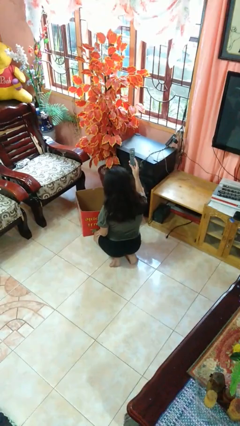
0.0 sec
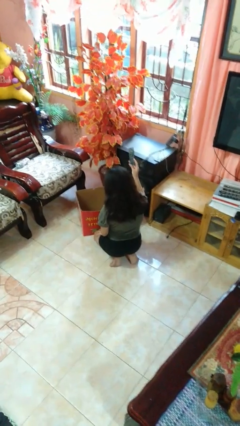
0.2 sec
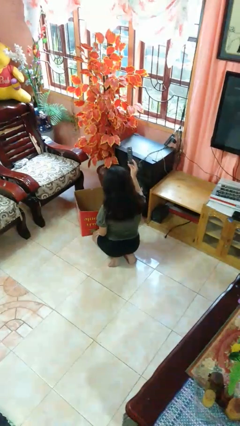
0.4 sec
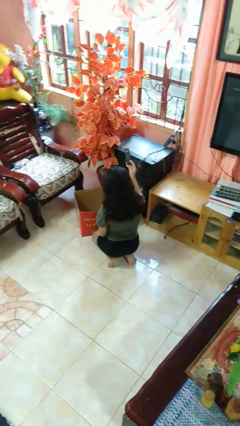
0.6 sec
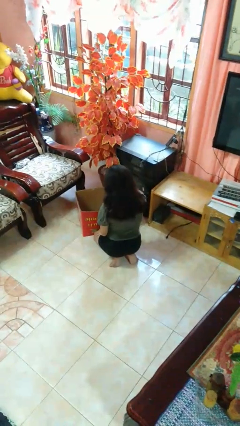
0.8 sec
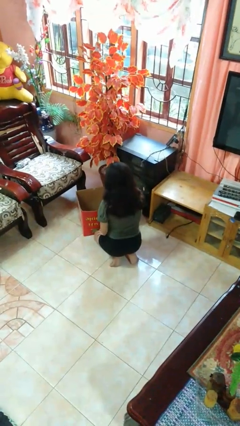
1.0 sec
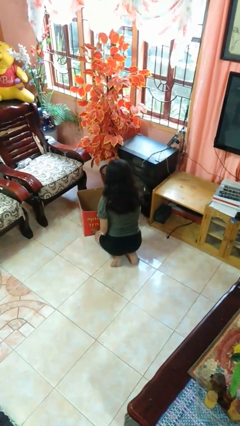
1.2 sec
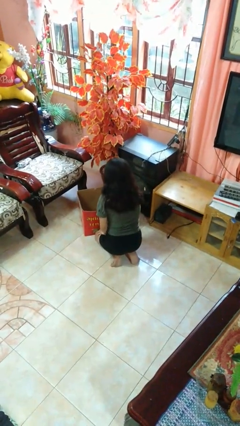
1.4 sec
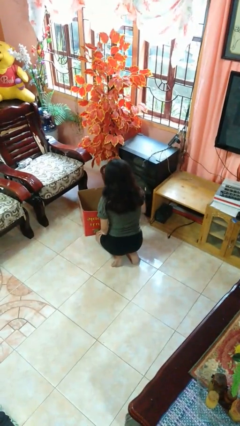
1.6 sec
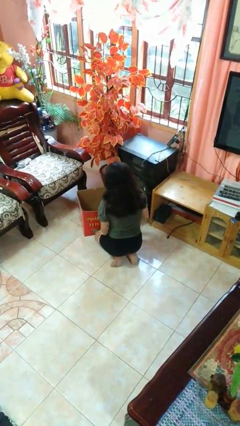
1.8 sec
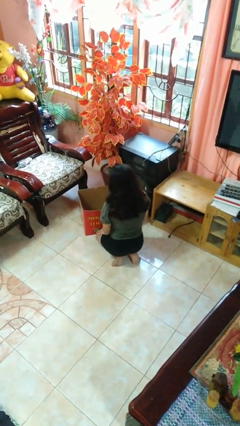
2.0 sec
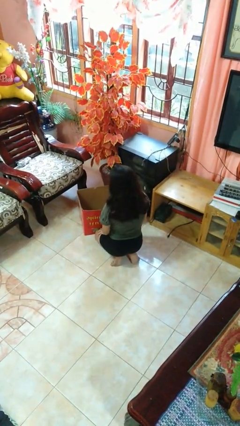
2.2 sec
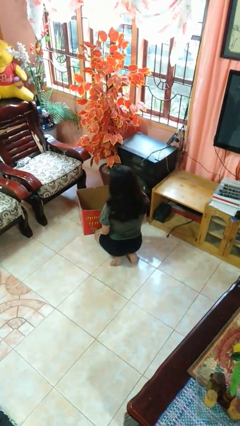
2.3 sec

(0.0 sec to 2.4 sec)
person puts object into box

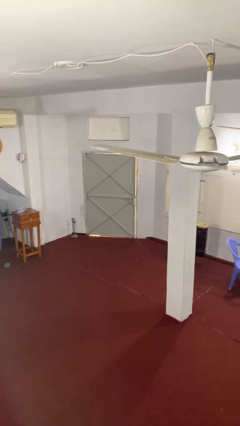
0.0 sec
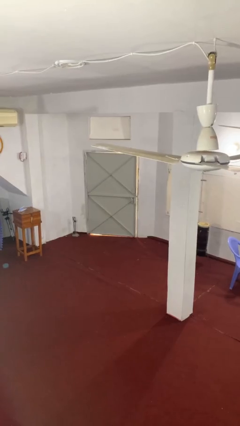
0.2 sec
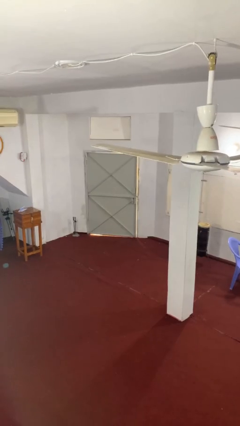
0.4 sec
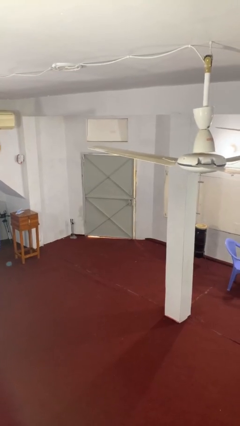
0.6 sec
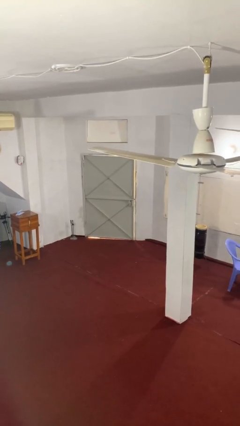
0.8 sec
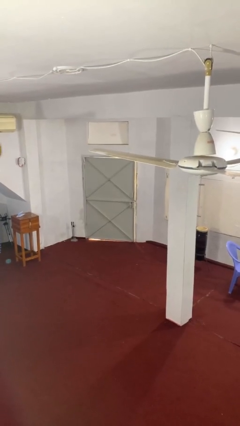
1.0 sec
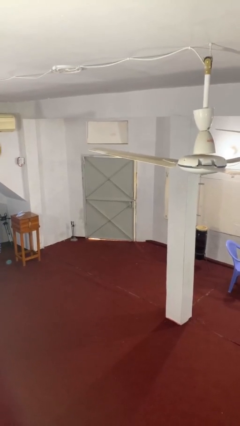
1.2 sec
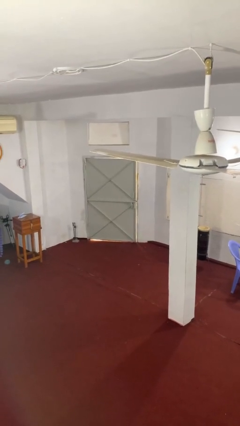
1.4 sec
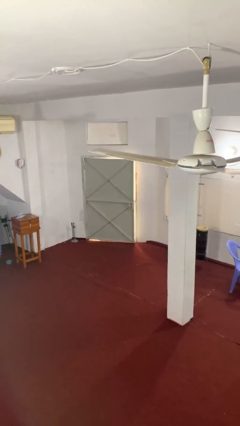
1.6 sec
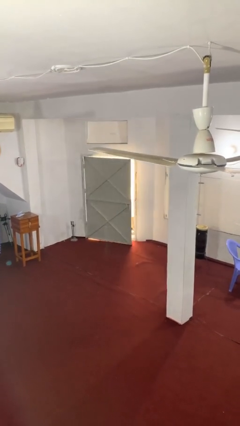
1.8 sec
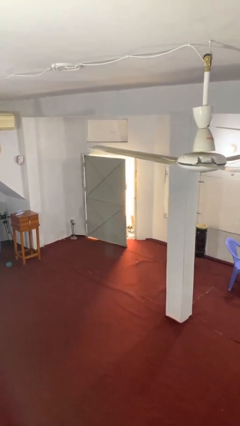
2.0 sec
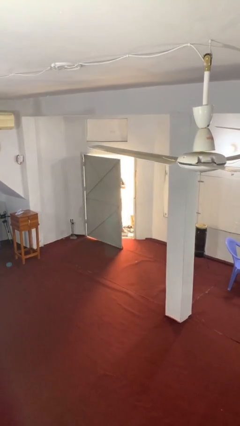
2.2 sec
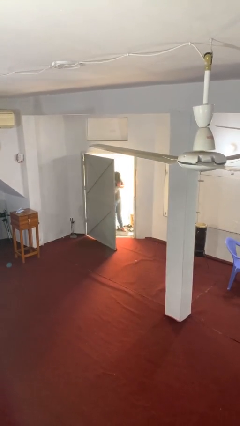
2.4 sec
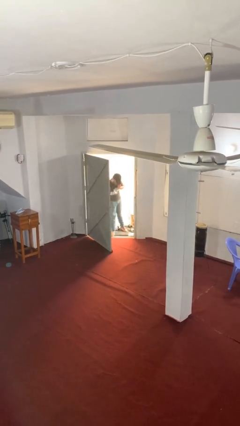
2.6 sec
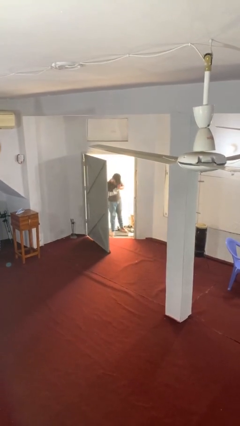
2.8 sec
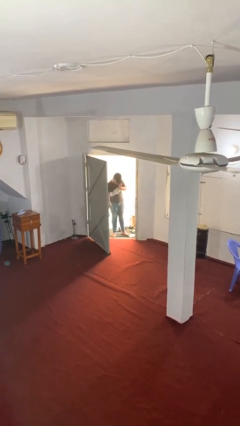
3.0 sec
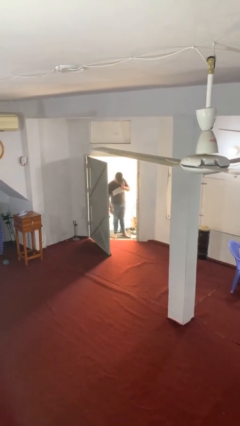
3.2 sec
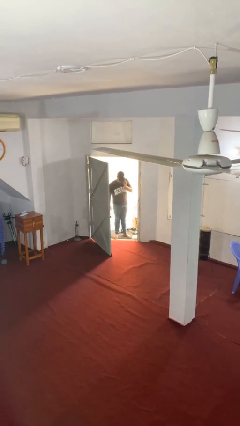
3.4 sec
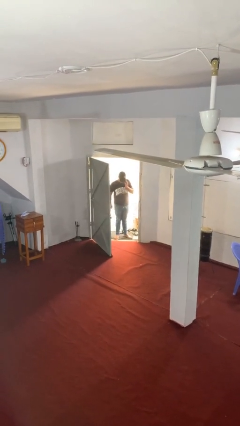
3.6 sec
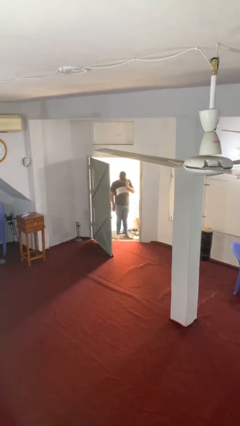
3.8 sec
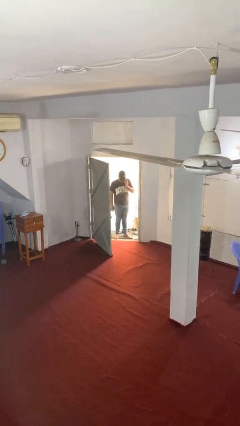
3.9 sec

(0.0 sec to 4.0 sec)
person opens facility door

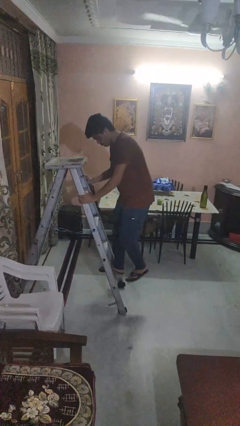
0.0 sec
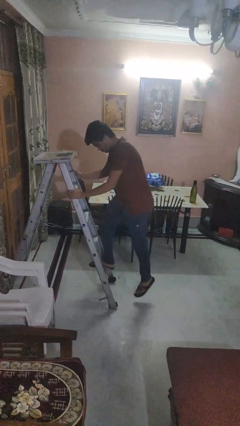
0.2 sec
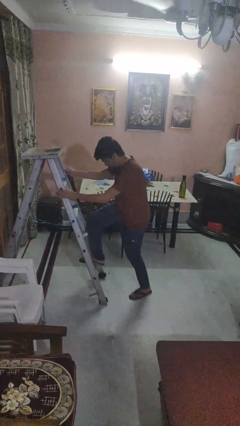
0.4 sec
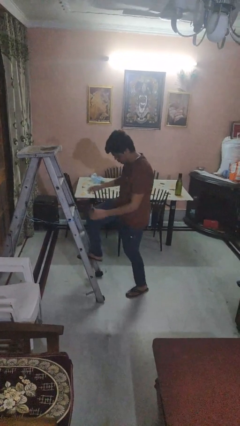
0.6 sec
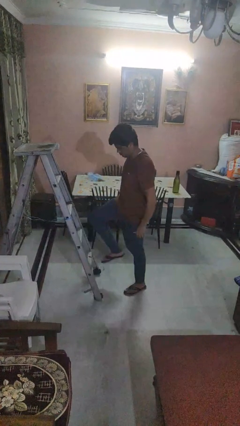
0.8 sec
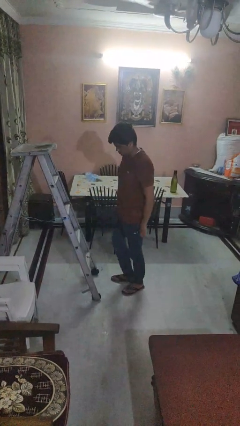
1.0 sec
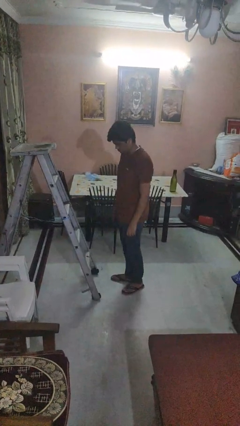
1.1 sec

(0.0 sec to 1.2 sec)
person climbs down ladder

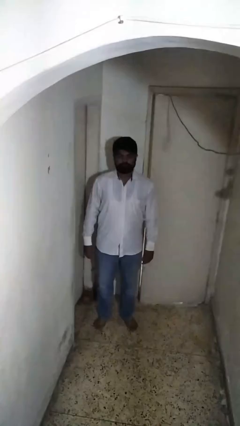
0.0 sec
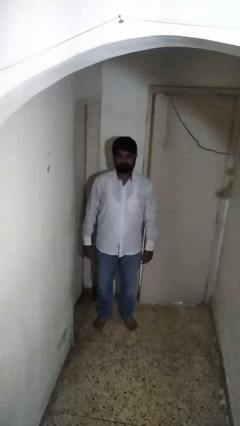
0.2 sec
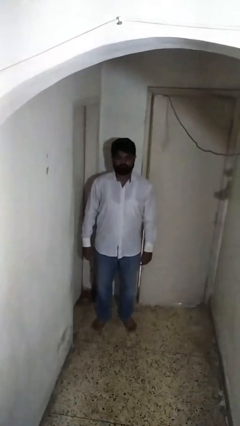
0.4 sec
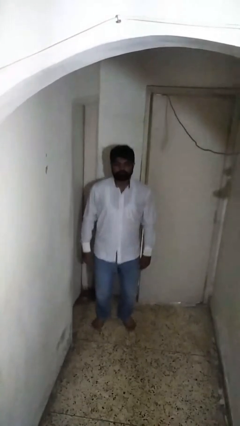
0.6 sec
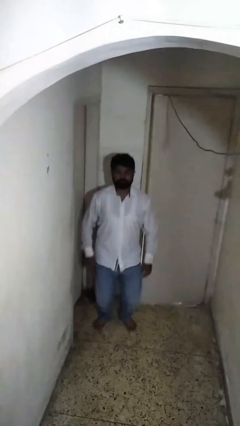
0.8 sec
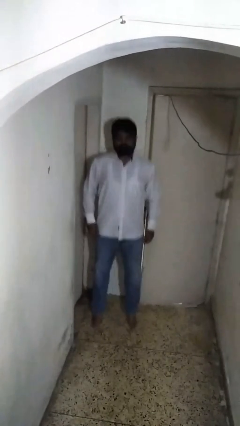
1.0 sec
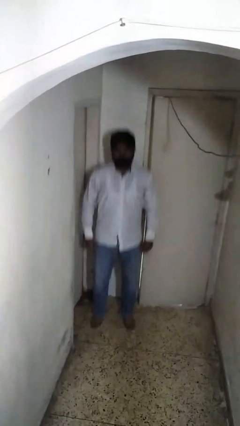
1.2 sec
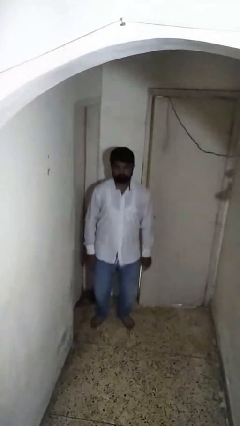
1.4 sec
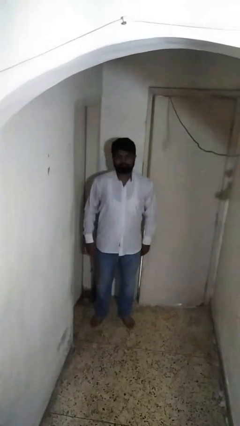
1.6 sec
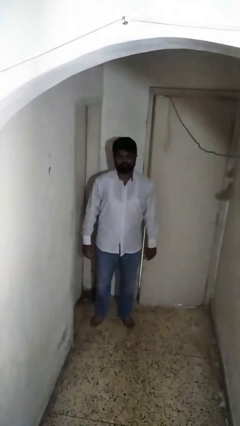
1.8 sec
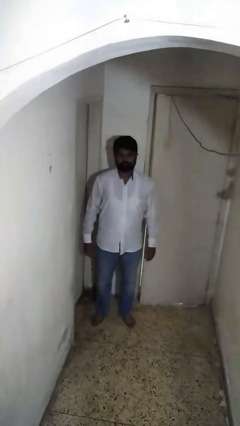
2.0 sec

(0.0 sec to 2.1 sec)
person jumps

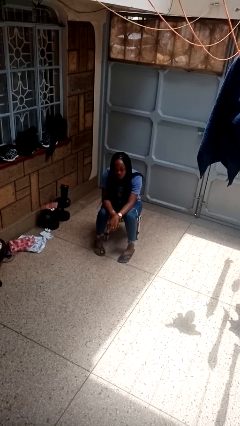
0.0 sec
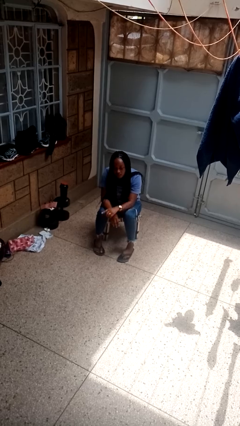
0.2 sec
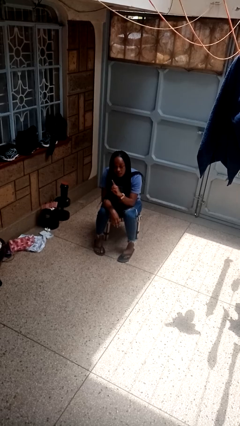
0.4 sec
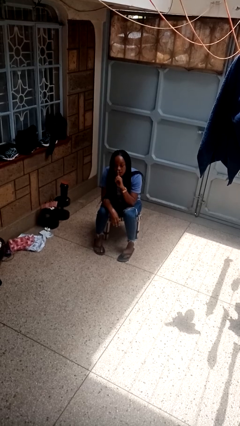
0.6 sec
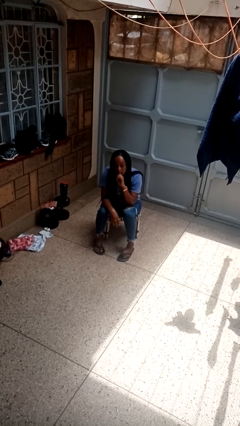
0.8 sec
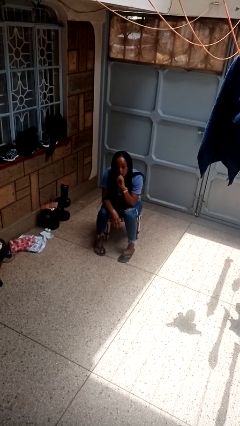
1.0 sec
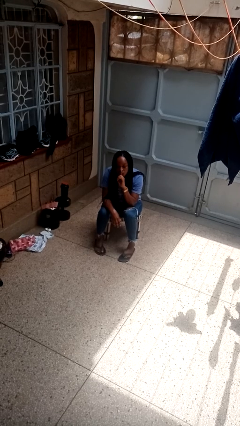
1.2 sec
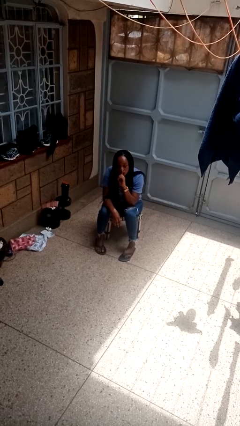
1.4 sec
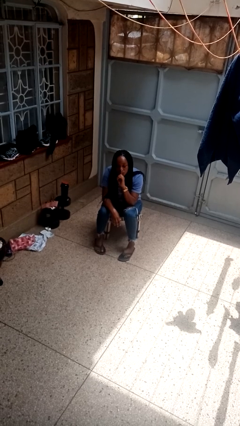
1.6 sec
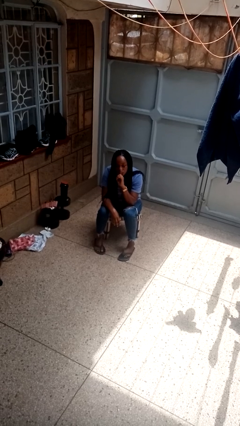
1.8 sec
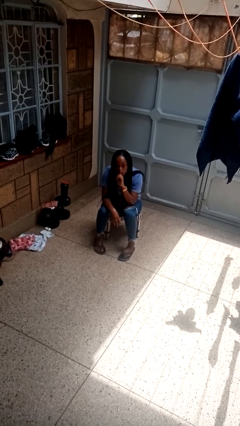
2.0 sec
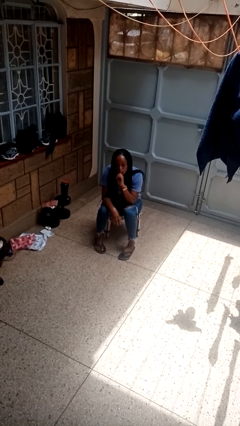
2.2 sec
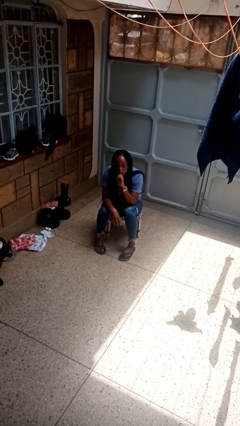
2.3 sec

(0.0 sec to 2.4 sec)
person gestures be quiet

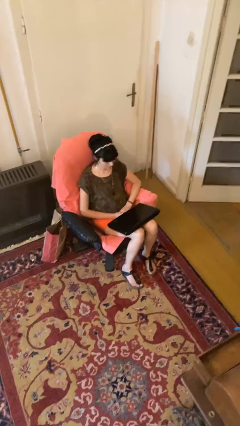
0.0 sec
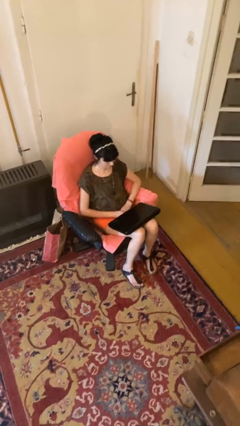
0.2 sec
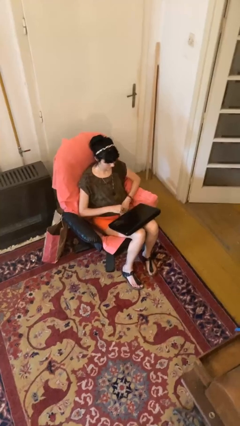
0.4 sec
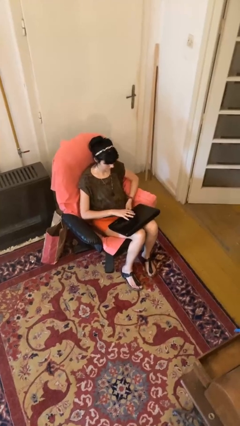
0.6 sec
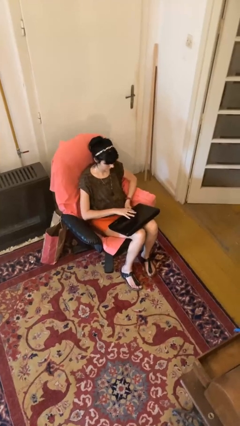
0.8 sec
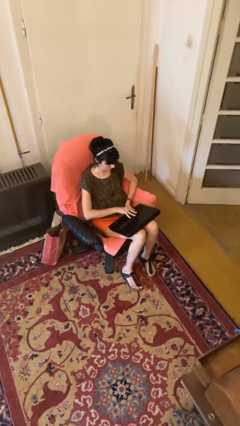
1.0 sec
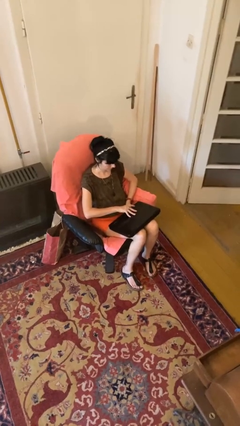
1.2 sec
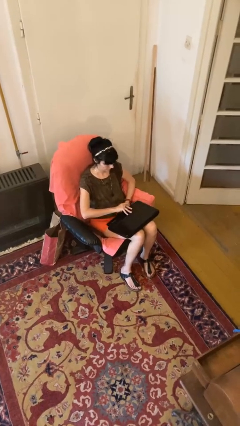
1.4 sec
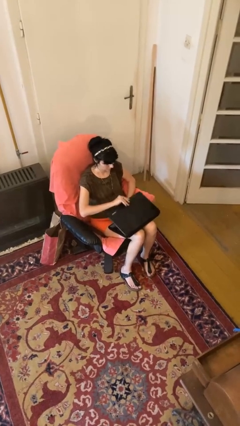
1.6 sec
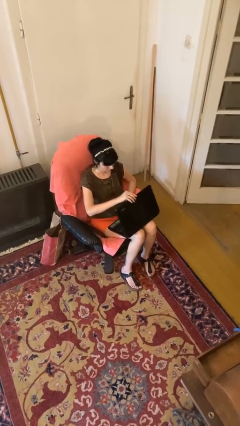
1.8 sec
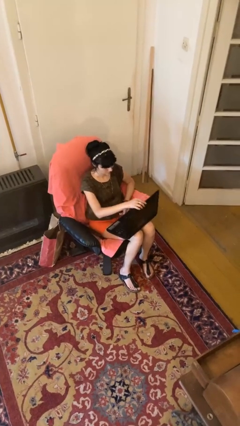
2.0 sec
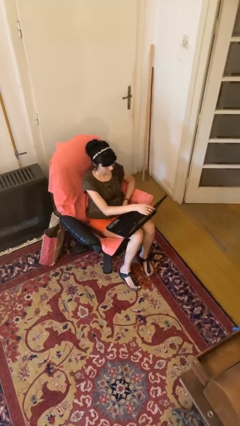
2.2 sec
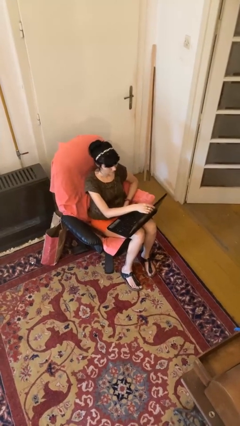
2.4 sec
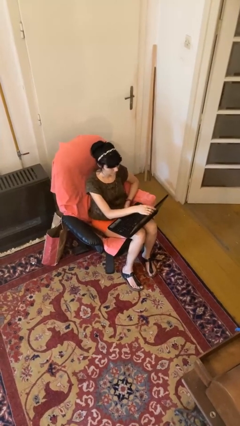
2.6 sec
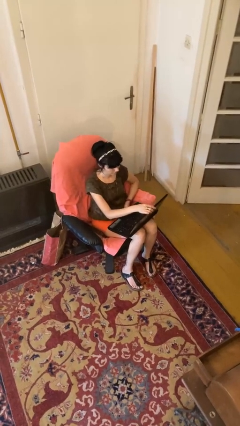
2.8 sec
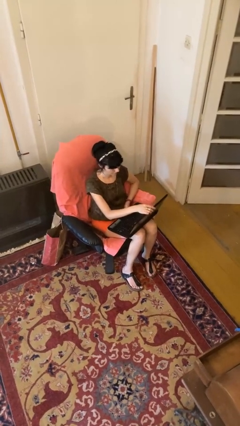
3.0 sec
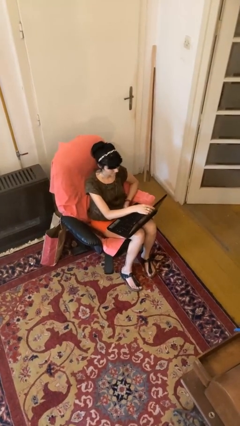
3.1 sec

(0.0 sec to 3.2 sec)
person opens laptop

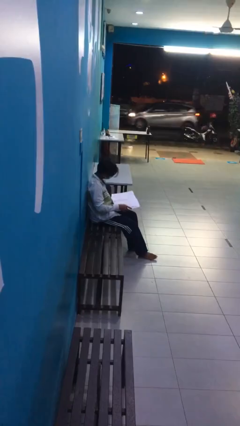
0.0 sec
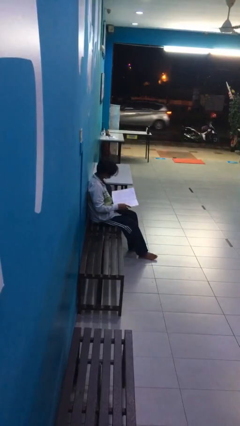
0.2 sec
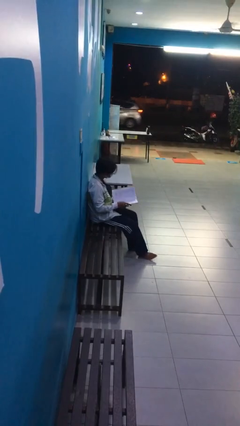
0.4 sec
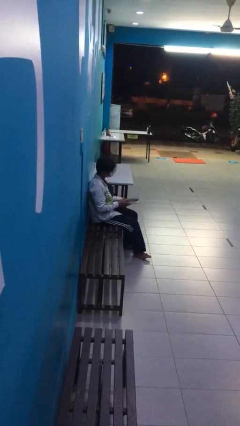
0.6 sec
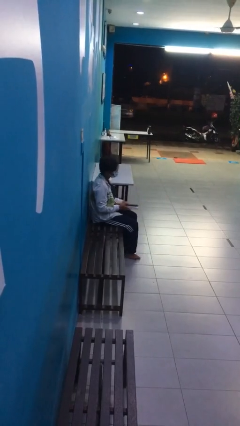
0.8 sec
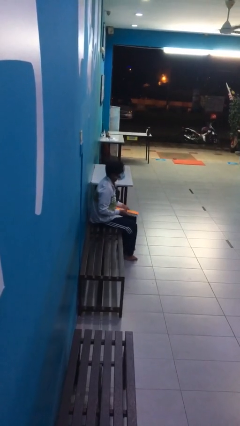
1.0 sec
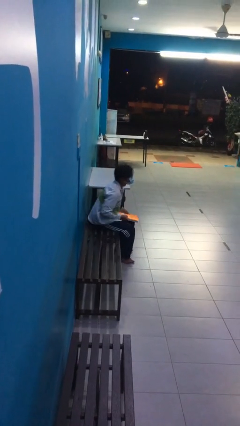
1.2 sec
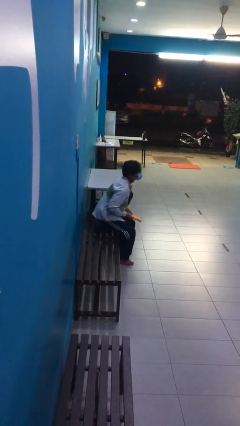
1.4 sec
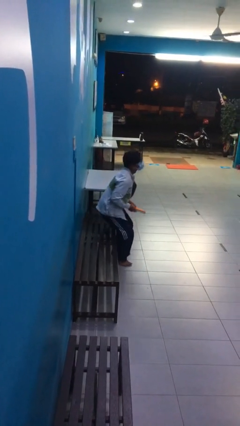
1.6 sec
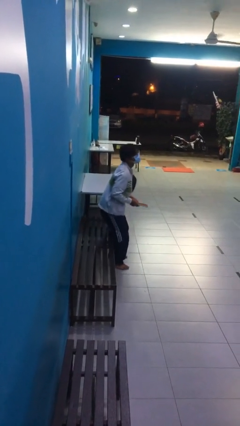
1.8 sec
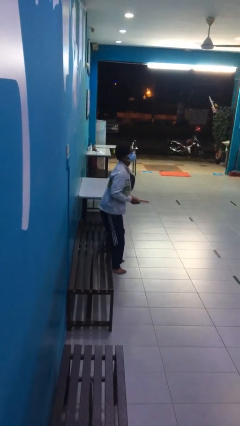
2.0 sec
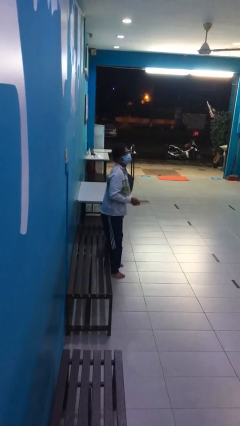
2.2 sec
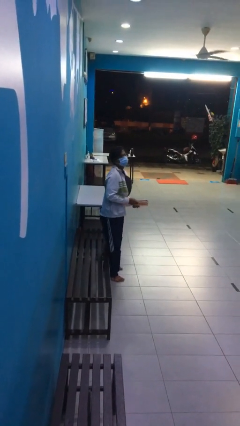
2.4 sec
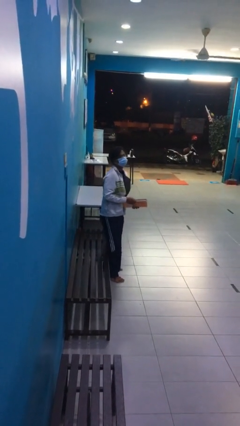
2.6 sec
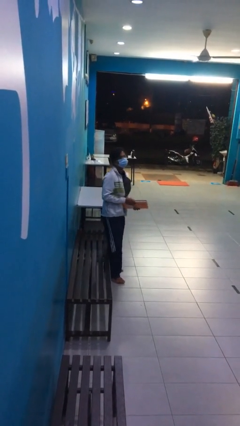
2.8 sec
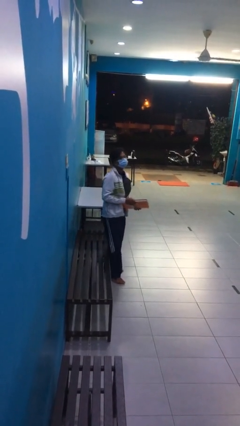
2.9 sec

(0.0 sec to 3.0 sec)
person stands up
